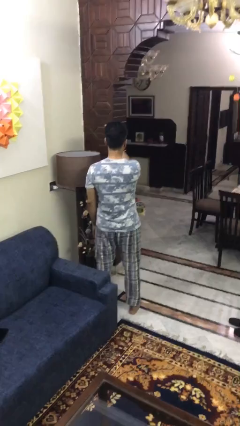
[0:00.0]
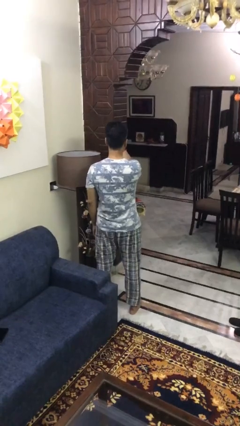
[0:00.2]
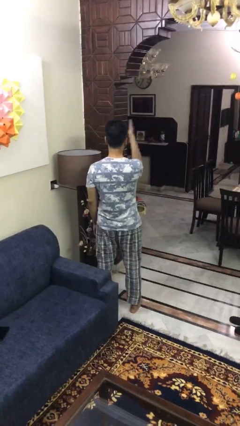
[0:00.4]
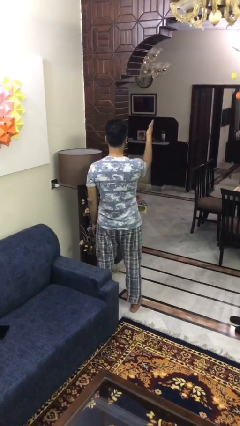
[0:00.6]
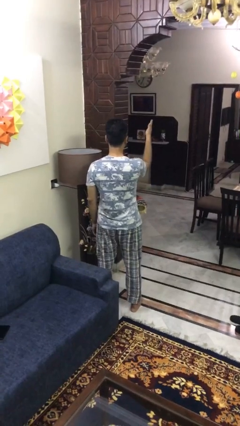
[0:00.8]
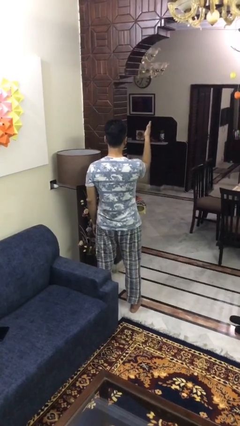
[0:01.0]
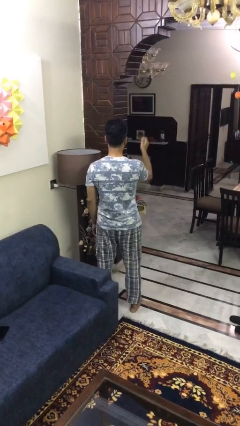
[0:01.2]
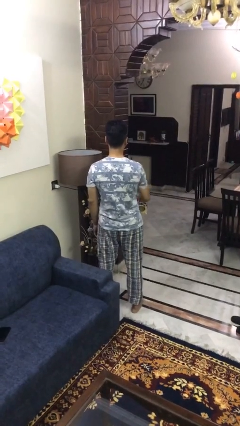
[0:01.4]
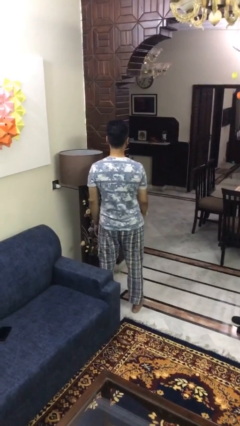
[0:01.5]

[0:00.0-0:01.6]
person gestures swipe right

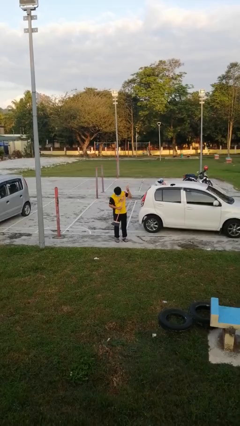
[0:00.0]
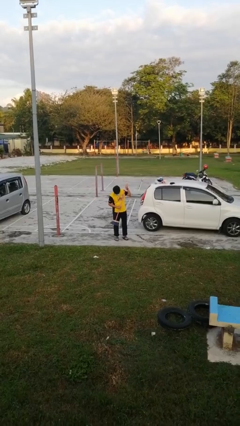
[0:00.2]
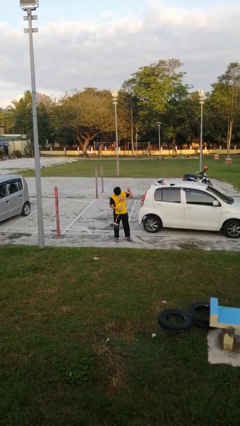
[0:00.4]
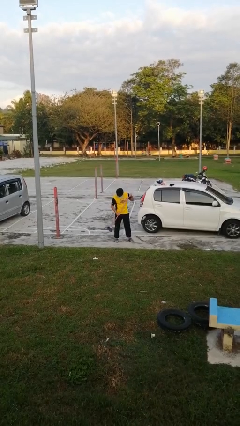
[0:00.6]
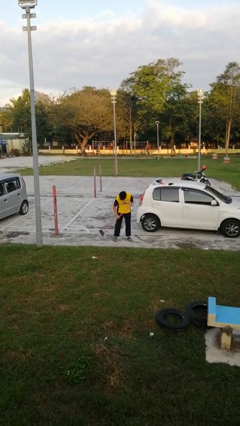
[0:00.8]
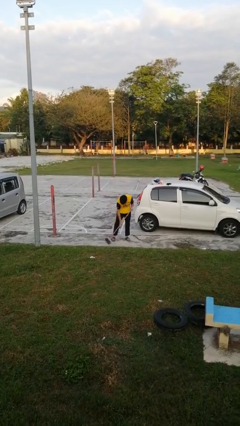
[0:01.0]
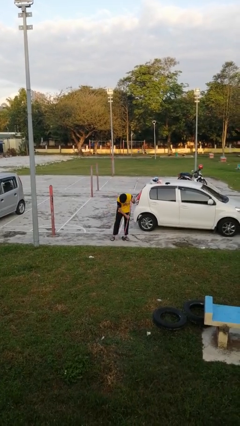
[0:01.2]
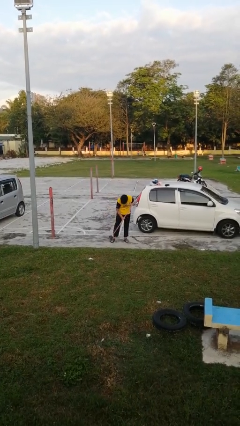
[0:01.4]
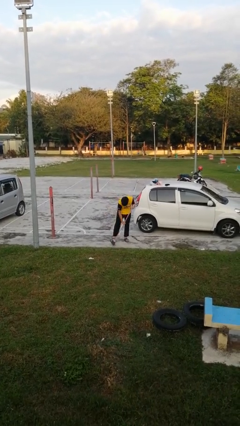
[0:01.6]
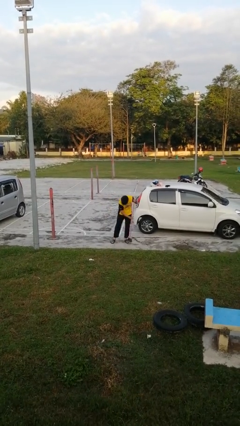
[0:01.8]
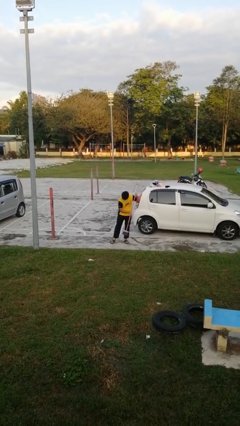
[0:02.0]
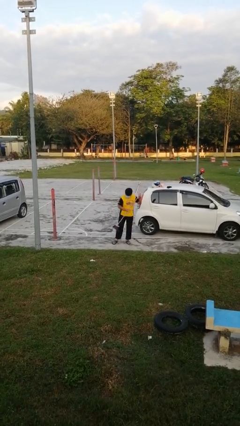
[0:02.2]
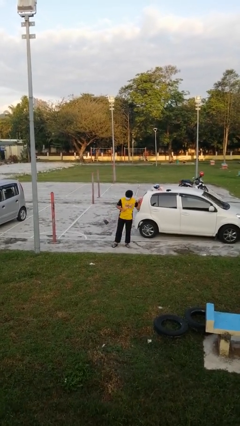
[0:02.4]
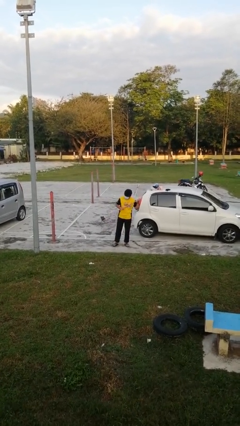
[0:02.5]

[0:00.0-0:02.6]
person sweeps floor

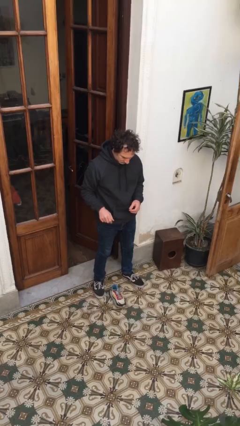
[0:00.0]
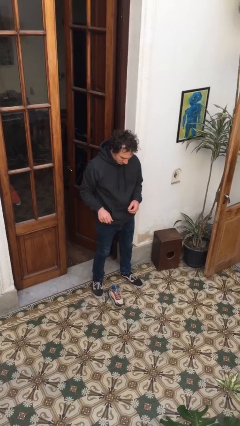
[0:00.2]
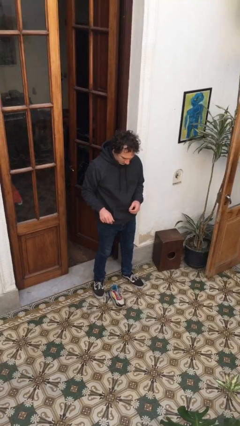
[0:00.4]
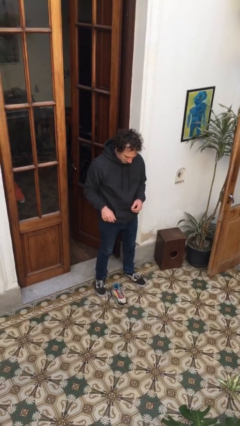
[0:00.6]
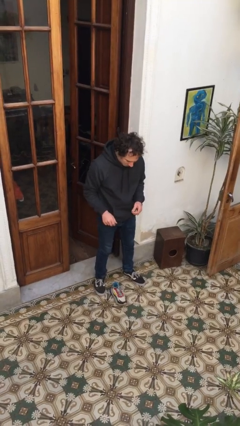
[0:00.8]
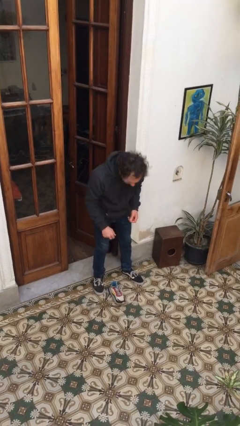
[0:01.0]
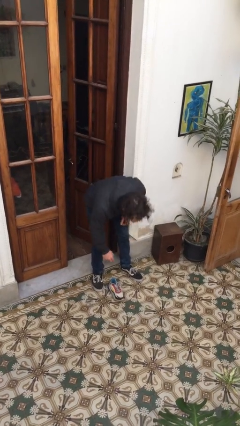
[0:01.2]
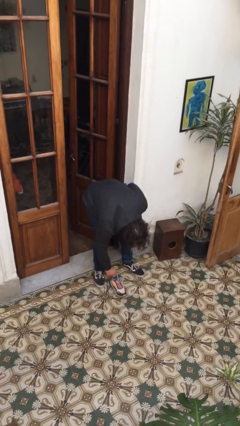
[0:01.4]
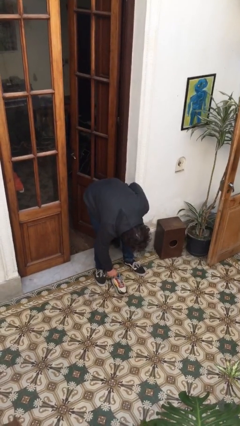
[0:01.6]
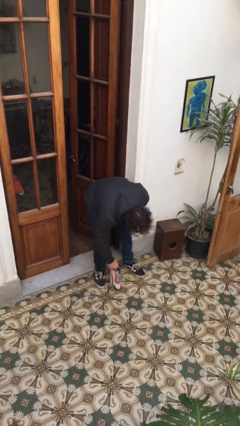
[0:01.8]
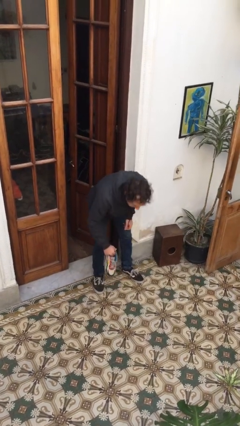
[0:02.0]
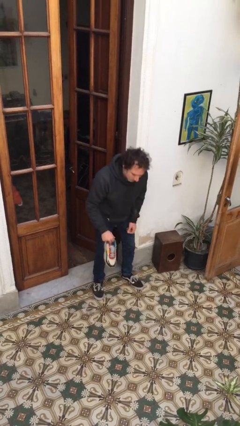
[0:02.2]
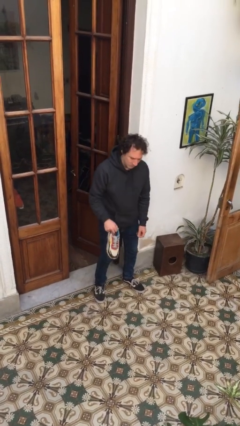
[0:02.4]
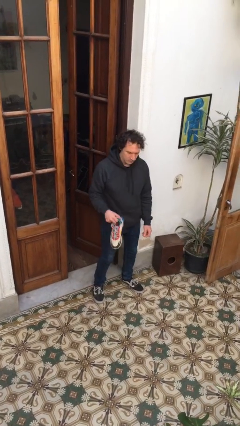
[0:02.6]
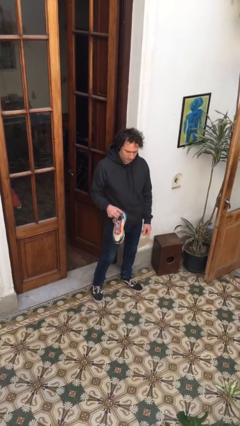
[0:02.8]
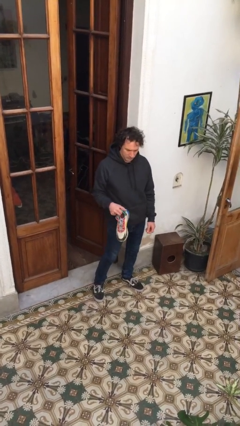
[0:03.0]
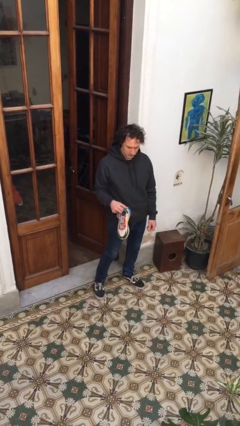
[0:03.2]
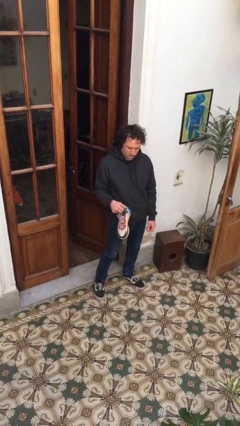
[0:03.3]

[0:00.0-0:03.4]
person picks up object from floor

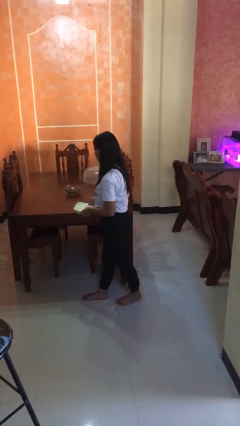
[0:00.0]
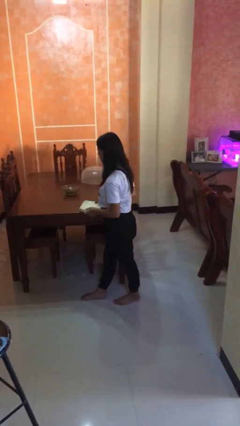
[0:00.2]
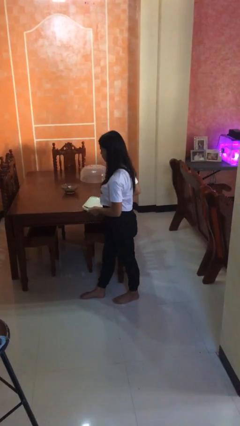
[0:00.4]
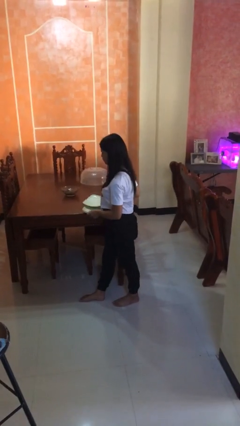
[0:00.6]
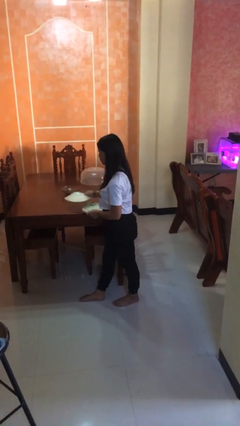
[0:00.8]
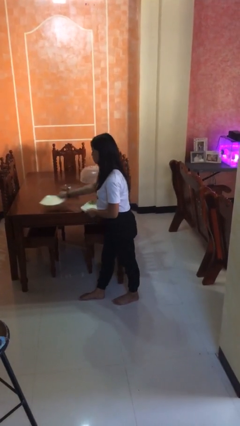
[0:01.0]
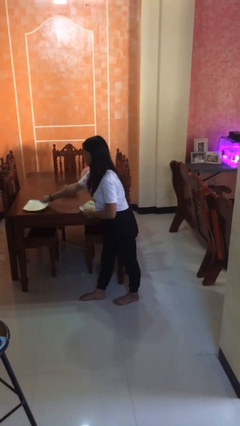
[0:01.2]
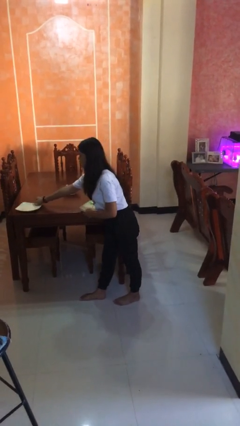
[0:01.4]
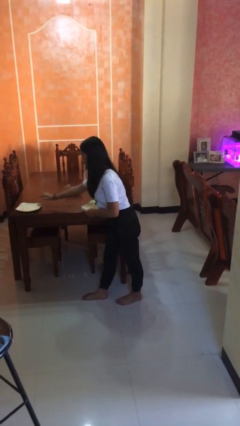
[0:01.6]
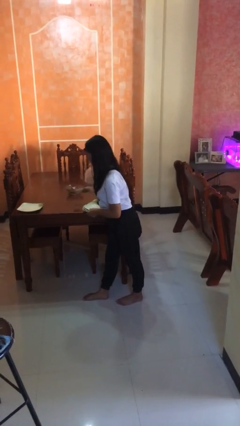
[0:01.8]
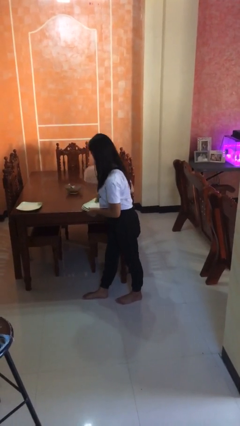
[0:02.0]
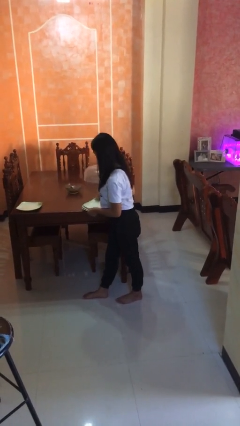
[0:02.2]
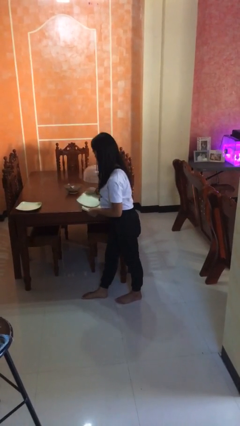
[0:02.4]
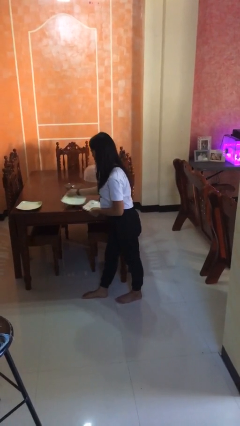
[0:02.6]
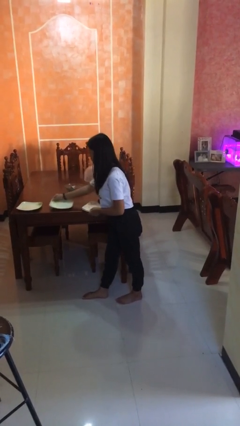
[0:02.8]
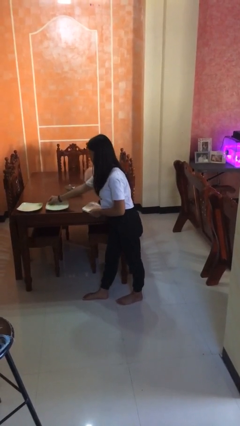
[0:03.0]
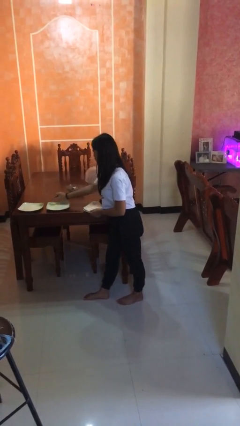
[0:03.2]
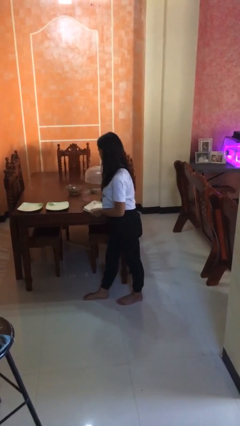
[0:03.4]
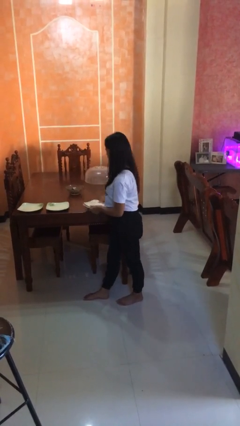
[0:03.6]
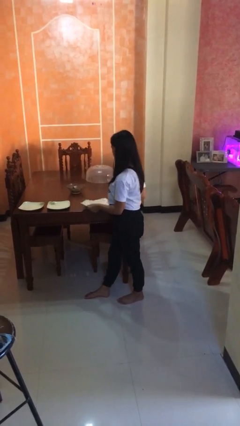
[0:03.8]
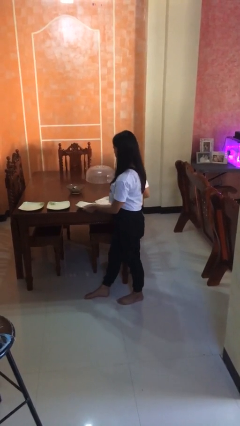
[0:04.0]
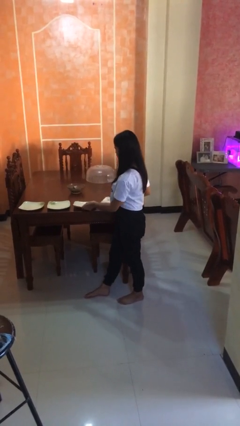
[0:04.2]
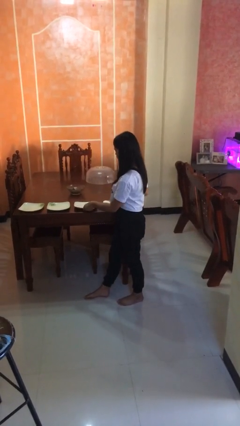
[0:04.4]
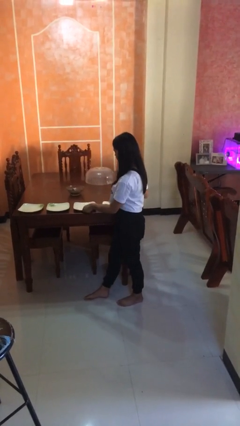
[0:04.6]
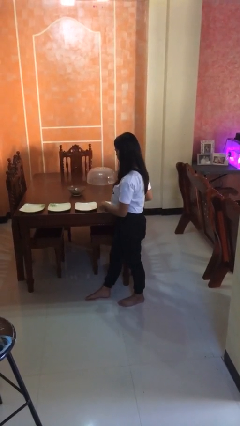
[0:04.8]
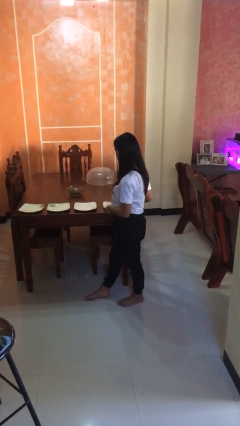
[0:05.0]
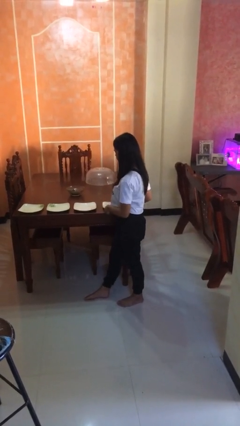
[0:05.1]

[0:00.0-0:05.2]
person sets table

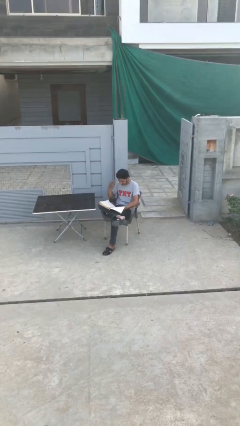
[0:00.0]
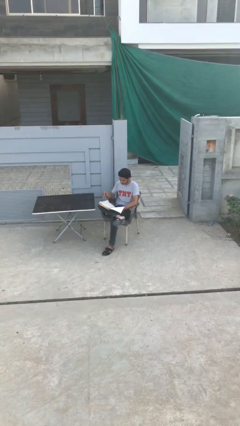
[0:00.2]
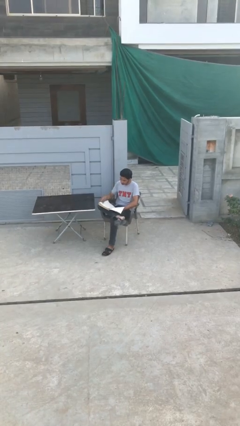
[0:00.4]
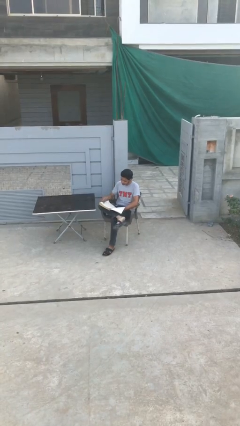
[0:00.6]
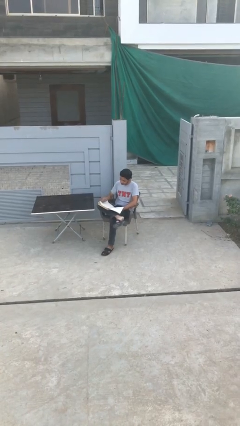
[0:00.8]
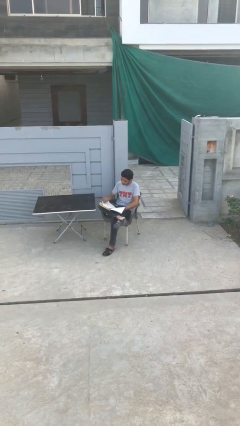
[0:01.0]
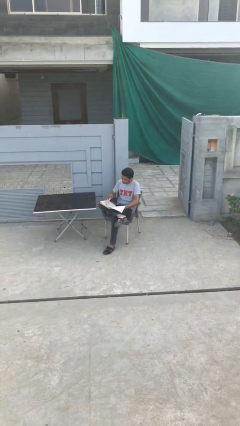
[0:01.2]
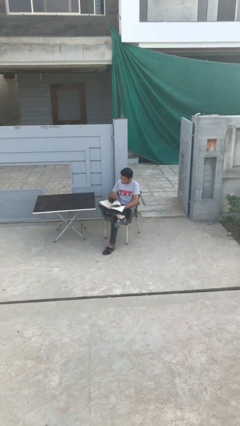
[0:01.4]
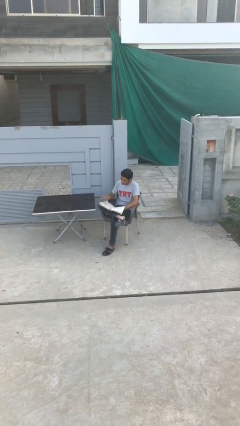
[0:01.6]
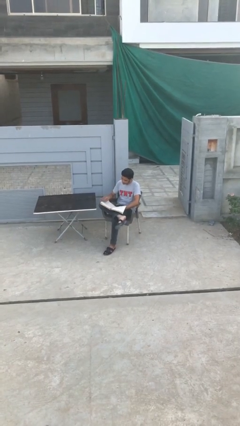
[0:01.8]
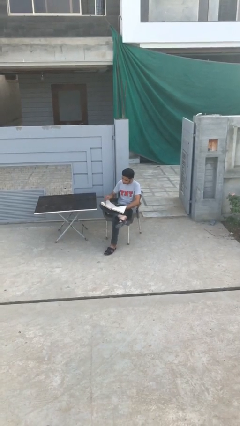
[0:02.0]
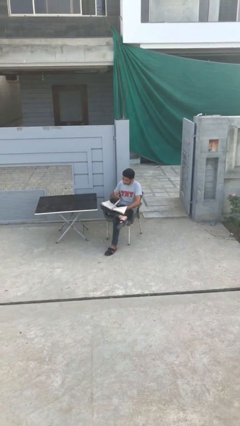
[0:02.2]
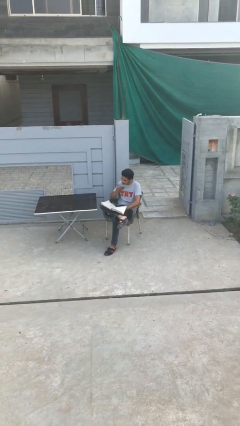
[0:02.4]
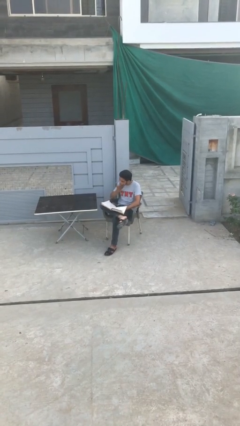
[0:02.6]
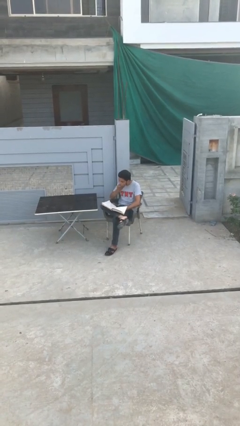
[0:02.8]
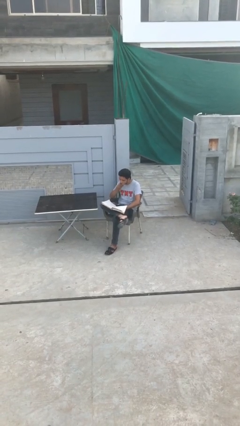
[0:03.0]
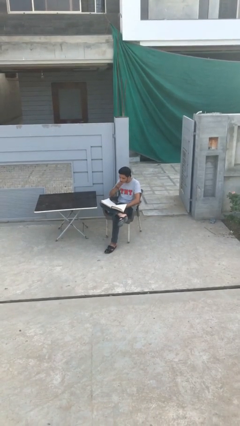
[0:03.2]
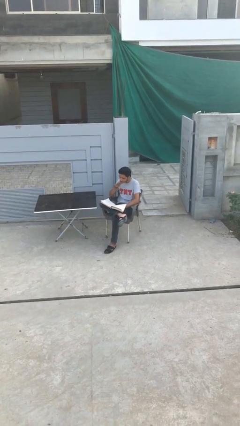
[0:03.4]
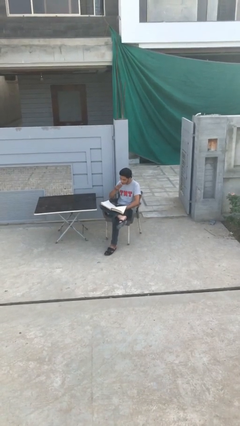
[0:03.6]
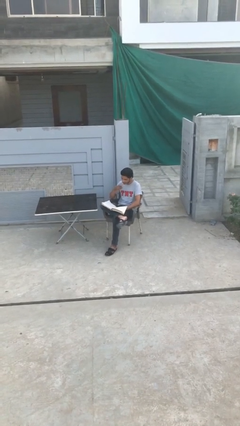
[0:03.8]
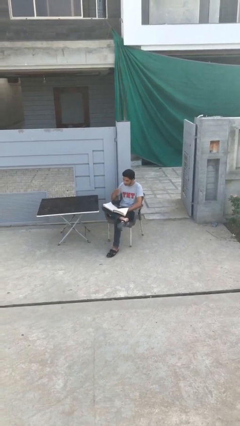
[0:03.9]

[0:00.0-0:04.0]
person reads document

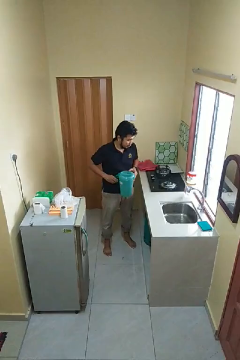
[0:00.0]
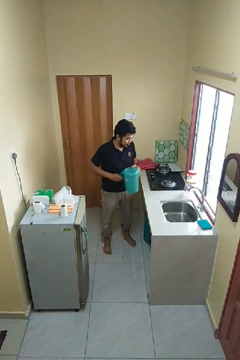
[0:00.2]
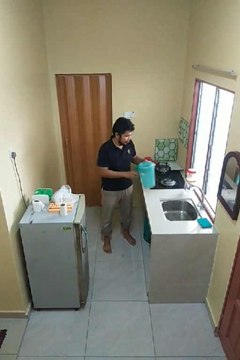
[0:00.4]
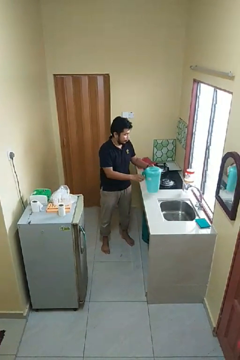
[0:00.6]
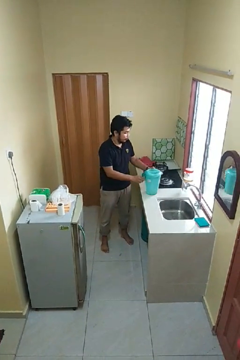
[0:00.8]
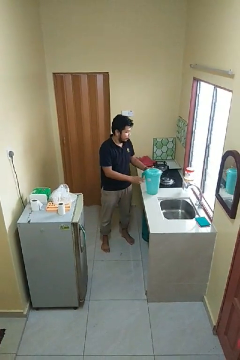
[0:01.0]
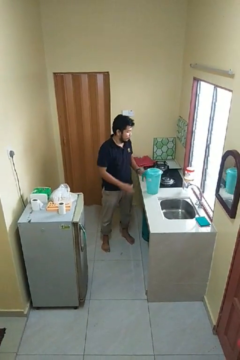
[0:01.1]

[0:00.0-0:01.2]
person puts down object on countertop
